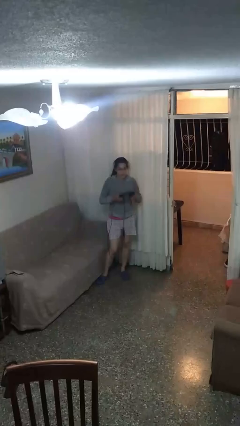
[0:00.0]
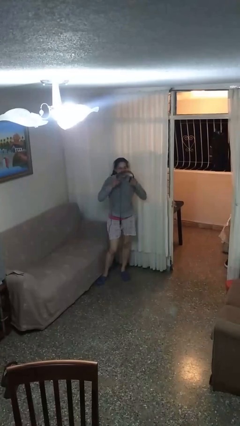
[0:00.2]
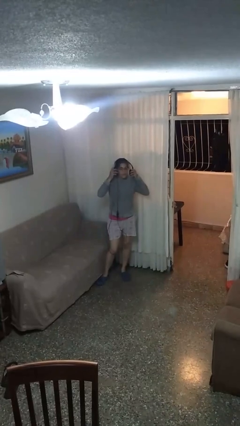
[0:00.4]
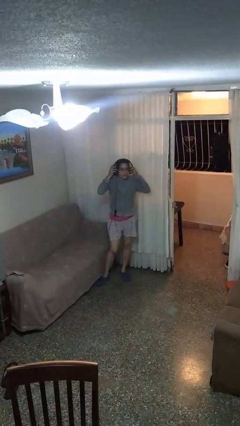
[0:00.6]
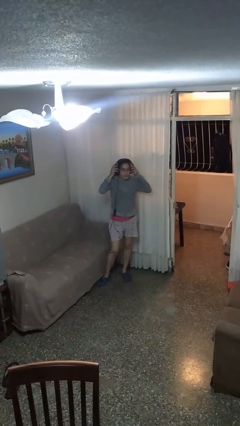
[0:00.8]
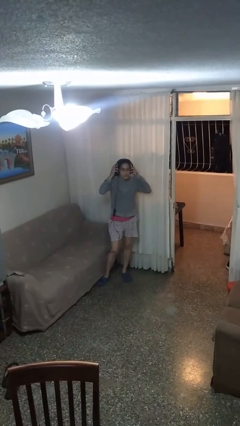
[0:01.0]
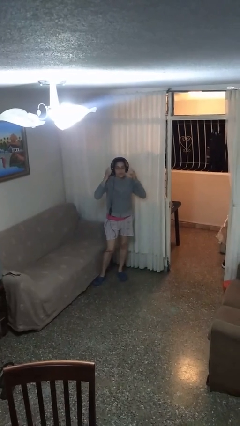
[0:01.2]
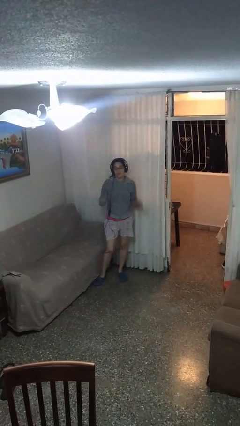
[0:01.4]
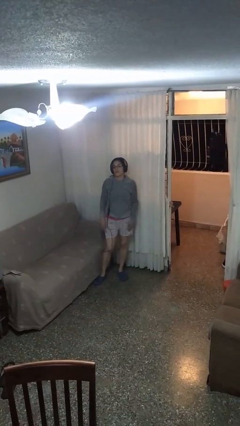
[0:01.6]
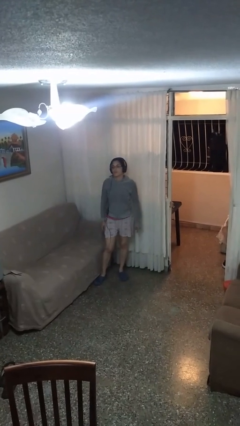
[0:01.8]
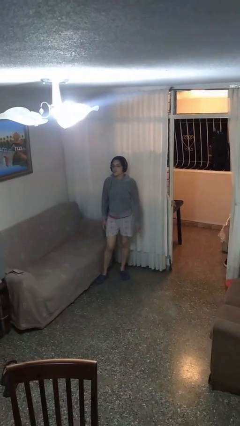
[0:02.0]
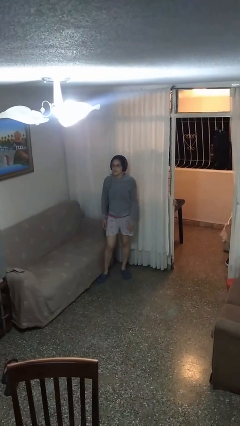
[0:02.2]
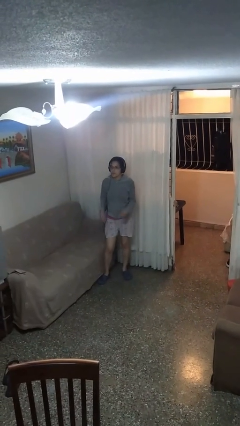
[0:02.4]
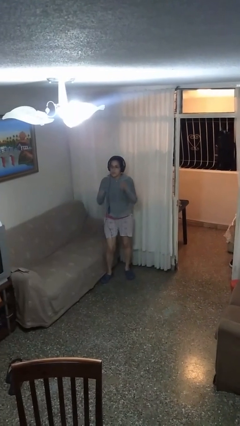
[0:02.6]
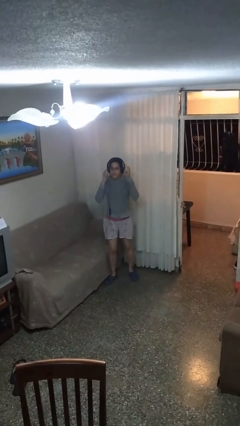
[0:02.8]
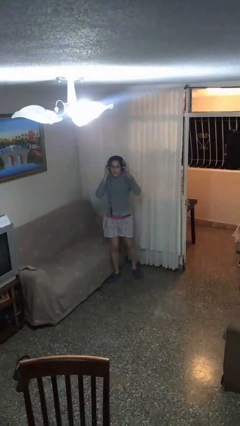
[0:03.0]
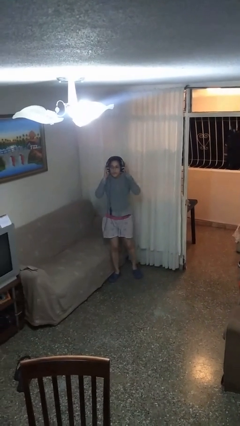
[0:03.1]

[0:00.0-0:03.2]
person puts on headphones

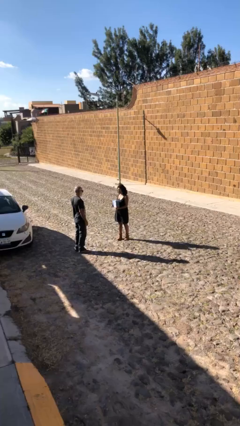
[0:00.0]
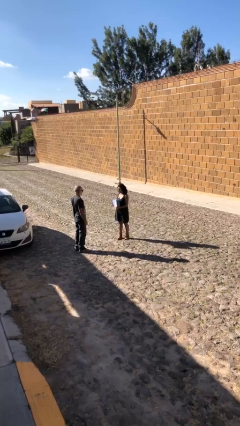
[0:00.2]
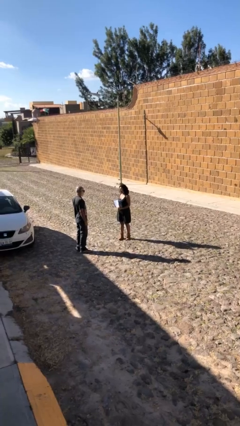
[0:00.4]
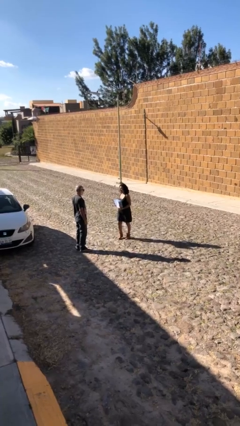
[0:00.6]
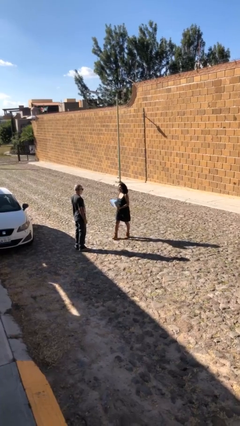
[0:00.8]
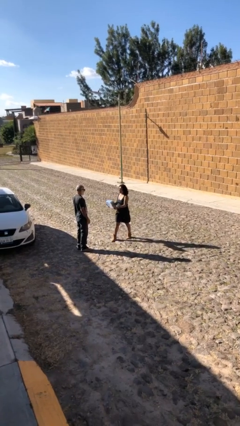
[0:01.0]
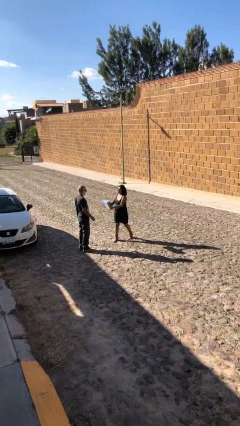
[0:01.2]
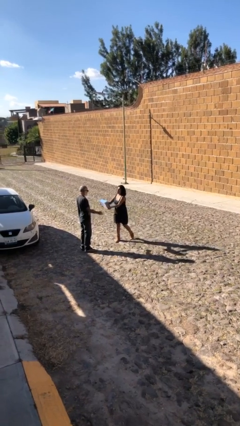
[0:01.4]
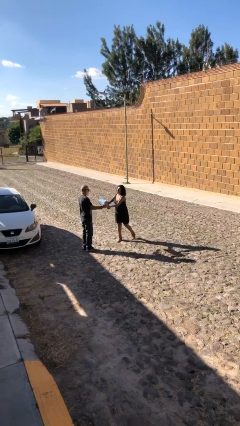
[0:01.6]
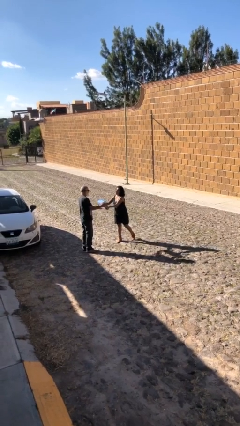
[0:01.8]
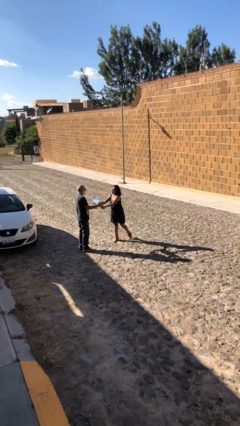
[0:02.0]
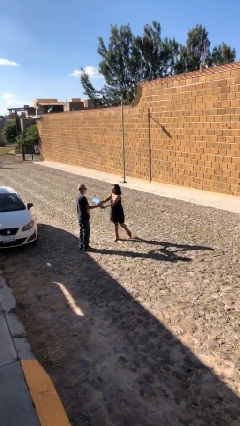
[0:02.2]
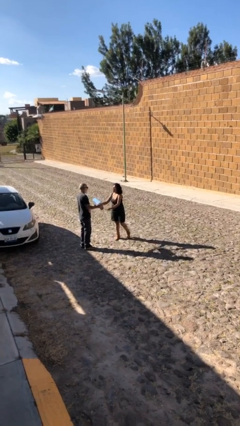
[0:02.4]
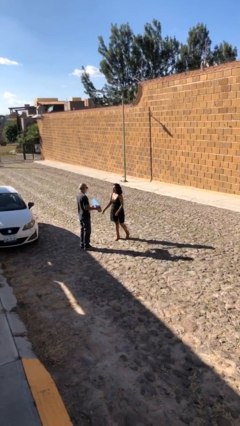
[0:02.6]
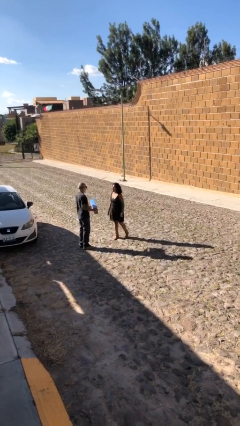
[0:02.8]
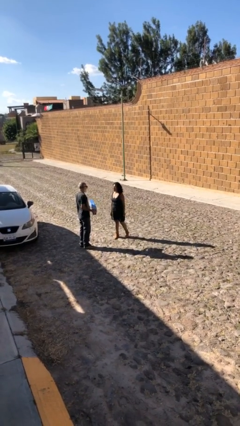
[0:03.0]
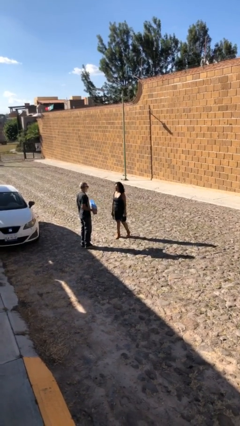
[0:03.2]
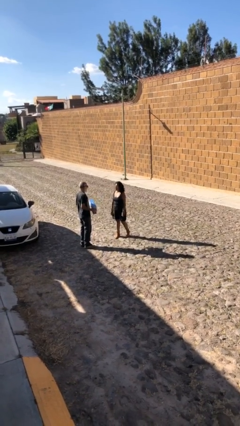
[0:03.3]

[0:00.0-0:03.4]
person transfers object to person

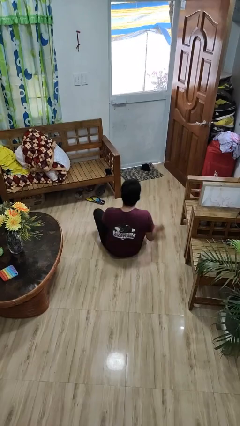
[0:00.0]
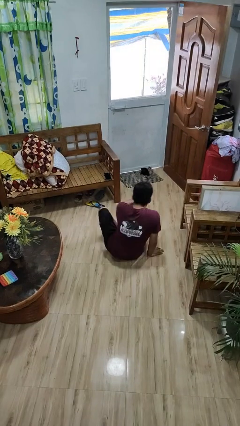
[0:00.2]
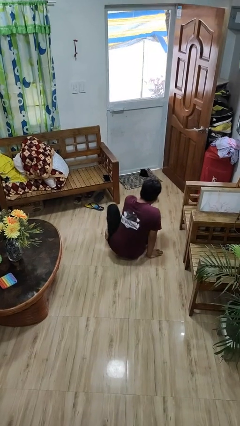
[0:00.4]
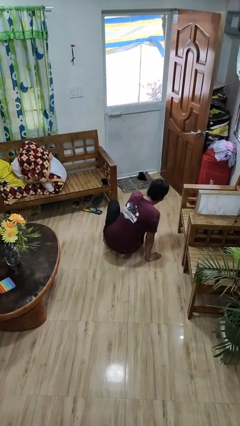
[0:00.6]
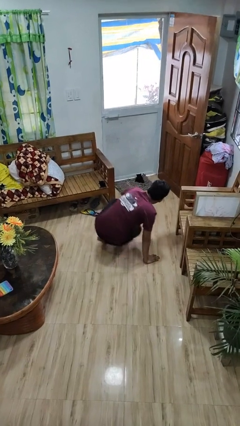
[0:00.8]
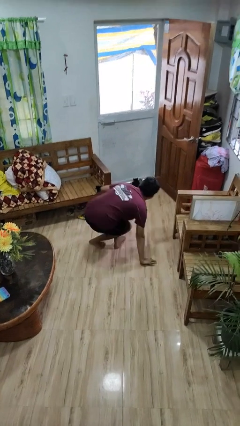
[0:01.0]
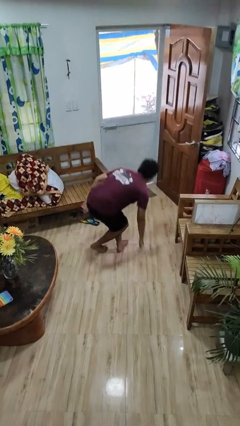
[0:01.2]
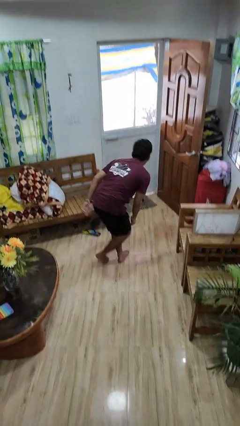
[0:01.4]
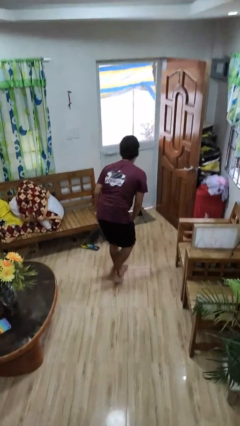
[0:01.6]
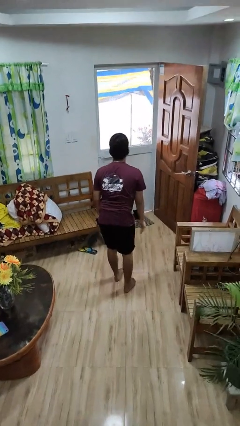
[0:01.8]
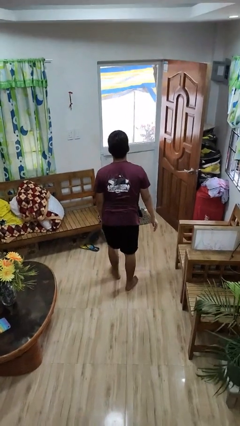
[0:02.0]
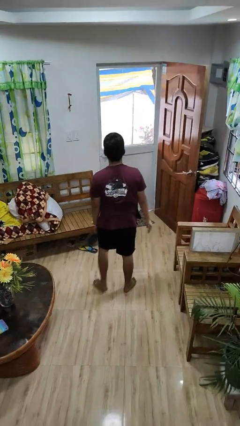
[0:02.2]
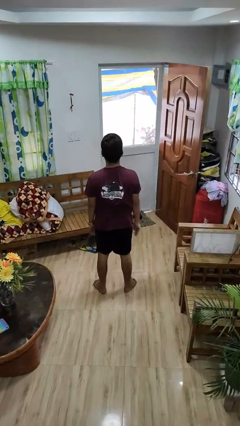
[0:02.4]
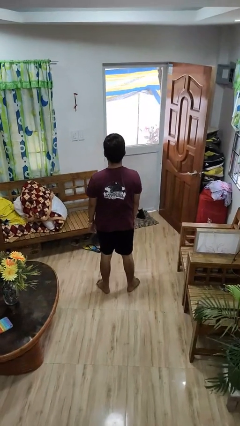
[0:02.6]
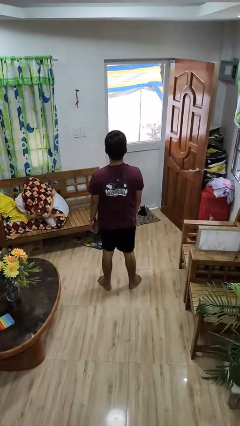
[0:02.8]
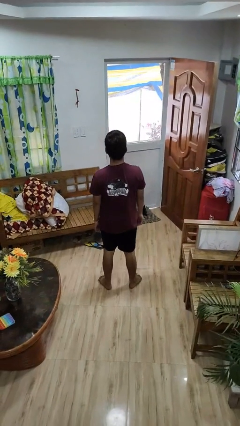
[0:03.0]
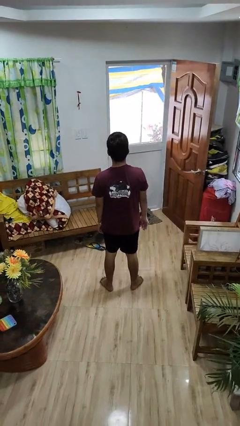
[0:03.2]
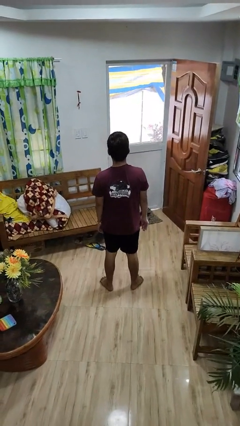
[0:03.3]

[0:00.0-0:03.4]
person stands up from floor

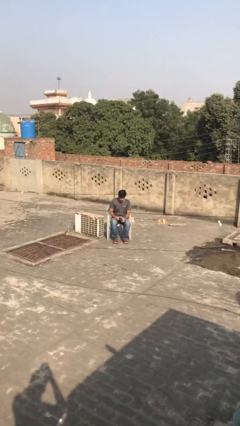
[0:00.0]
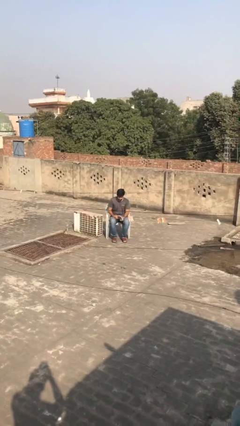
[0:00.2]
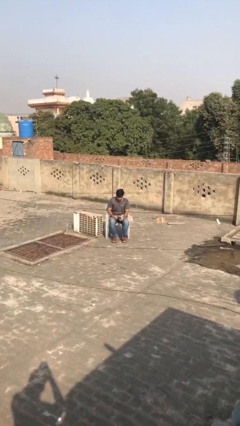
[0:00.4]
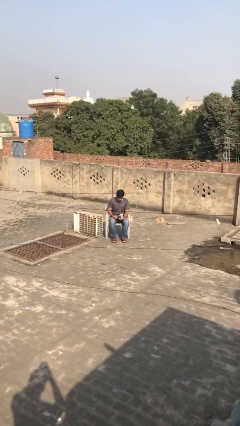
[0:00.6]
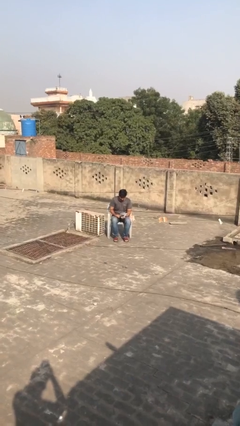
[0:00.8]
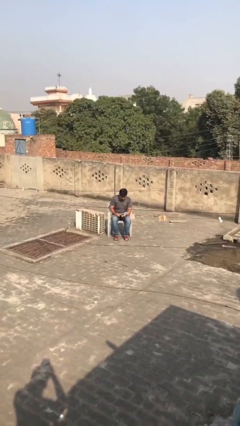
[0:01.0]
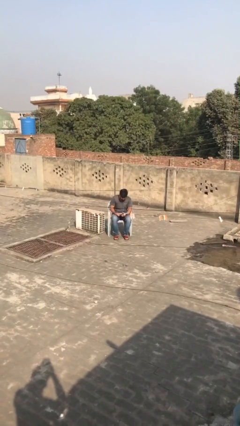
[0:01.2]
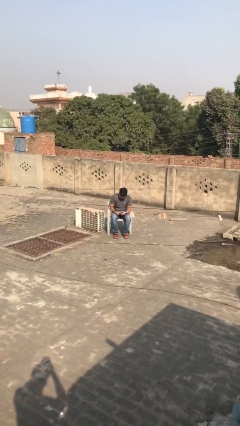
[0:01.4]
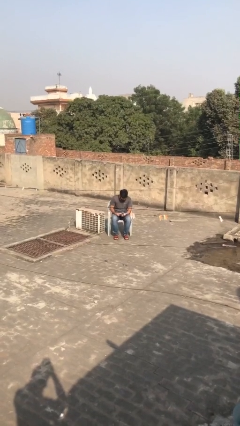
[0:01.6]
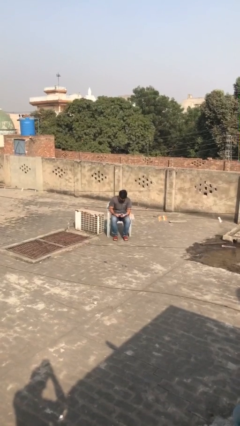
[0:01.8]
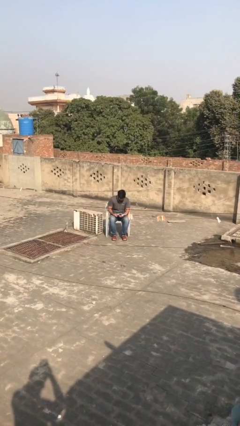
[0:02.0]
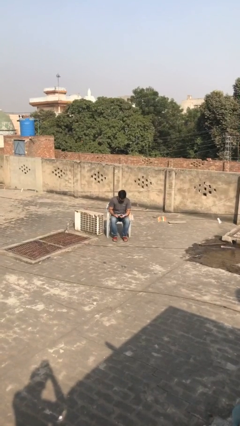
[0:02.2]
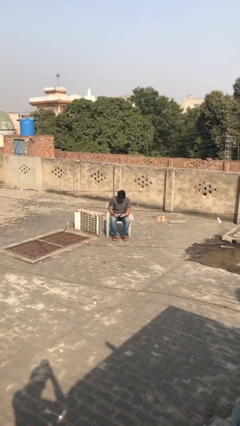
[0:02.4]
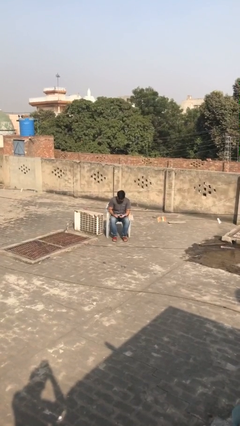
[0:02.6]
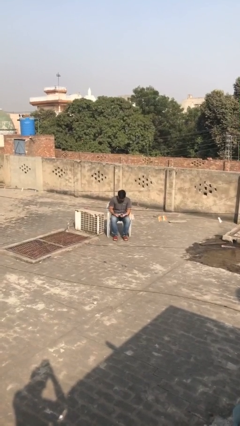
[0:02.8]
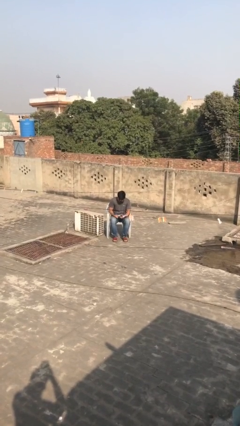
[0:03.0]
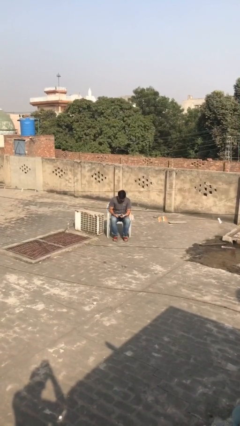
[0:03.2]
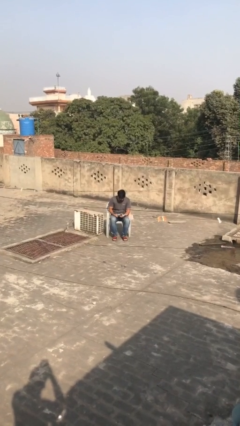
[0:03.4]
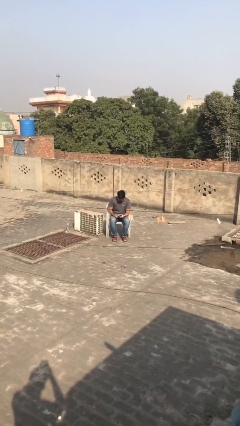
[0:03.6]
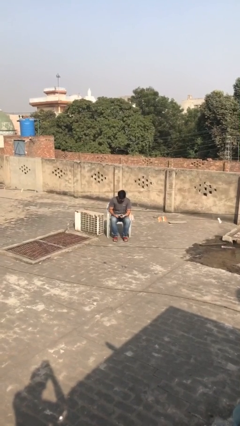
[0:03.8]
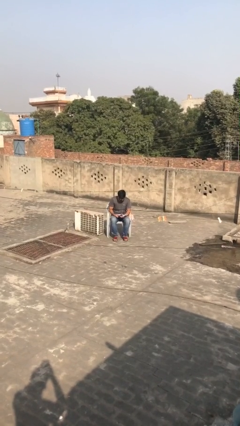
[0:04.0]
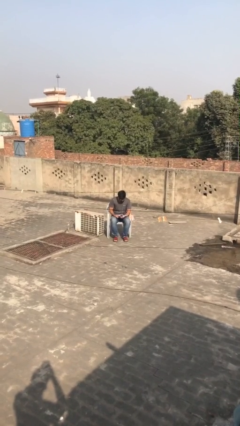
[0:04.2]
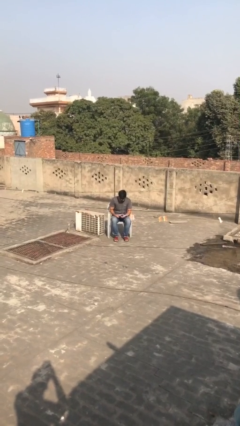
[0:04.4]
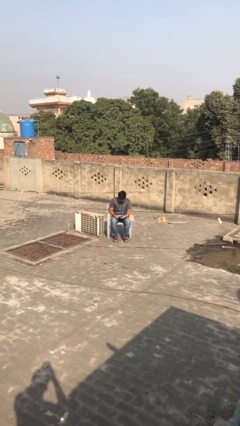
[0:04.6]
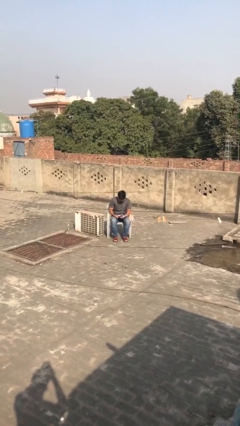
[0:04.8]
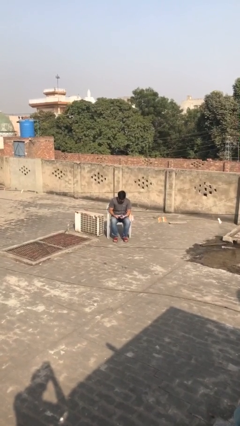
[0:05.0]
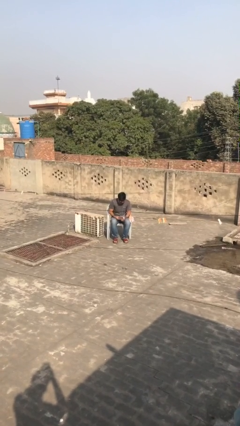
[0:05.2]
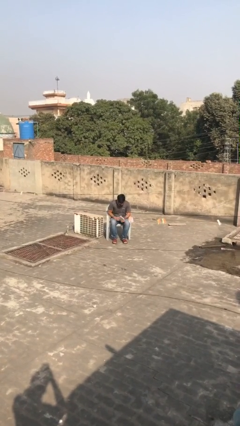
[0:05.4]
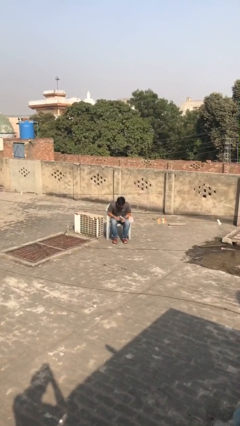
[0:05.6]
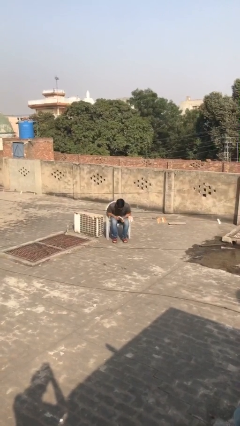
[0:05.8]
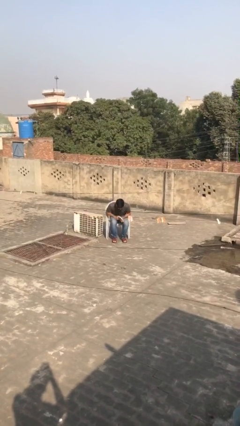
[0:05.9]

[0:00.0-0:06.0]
person reads document

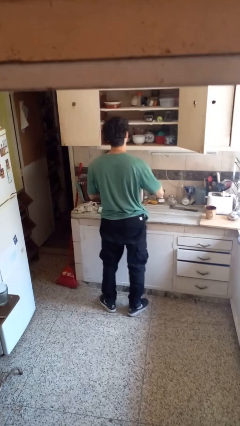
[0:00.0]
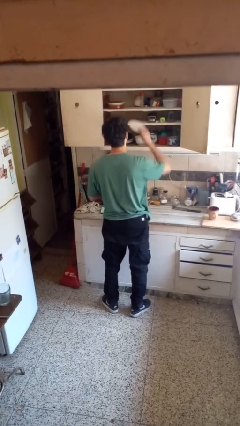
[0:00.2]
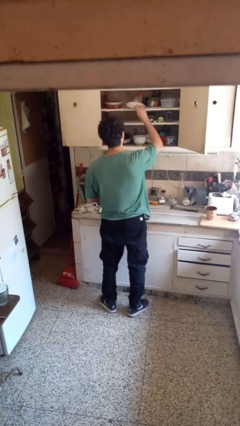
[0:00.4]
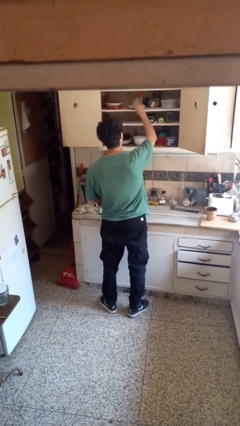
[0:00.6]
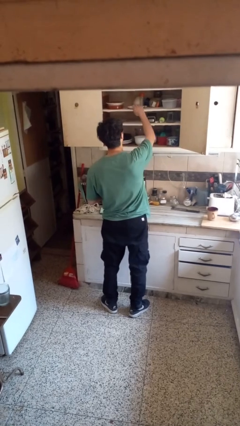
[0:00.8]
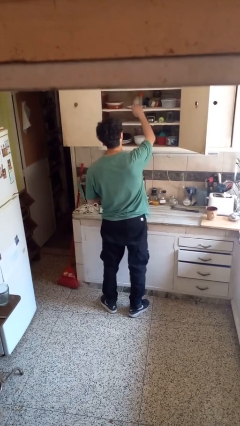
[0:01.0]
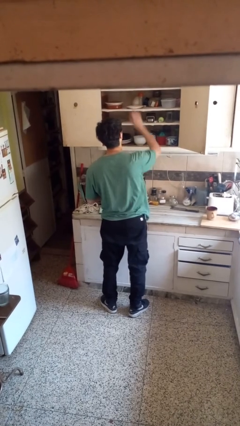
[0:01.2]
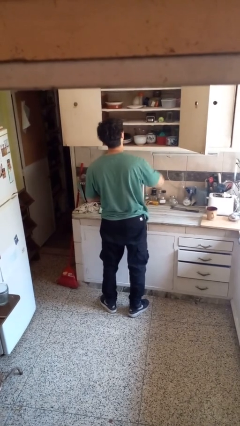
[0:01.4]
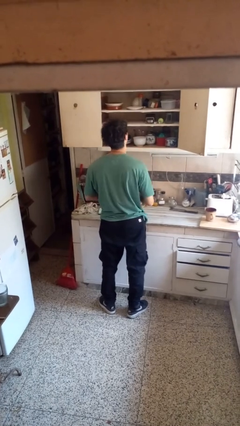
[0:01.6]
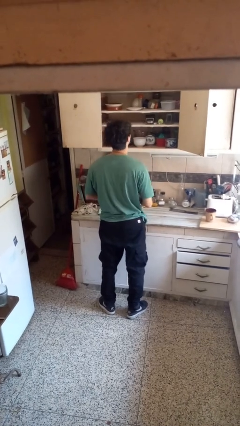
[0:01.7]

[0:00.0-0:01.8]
person puts object in cabinet
